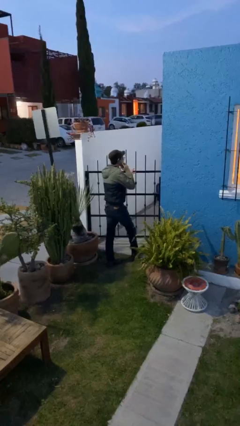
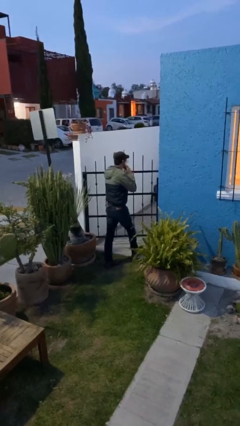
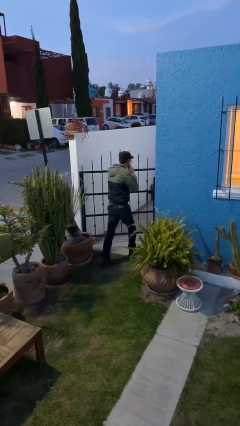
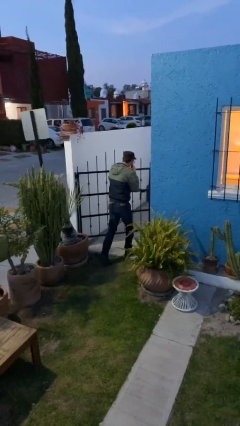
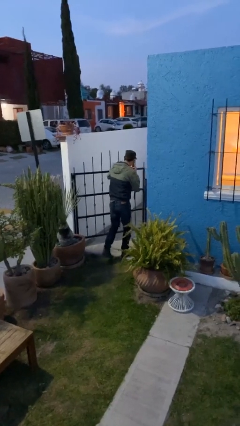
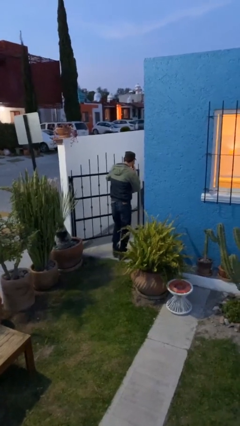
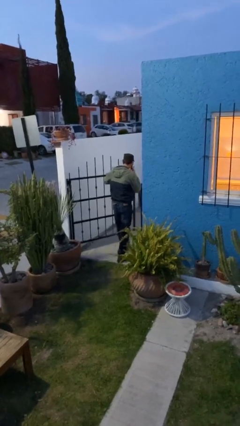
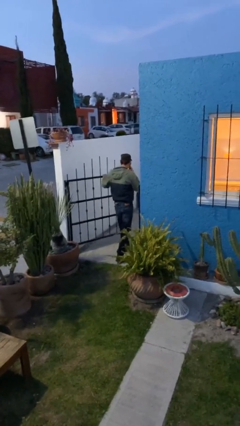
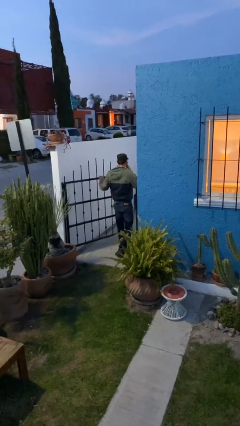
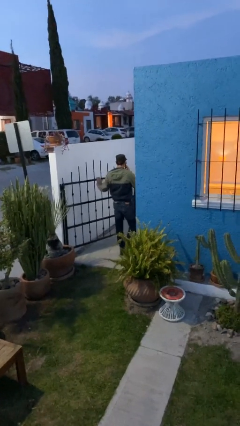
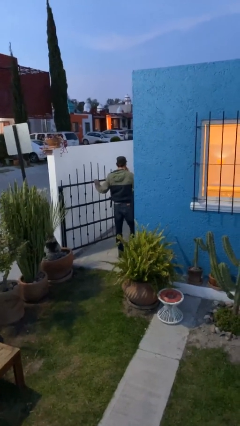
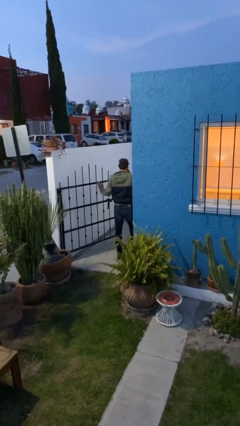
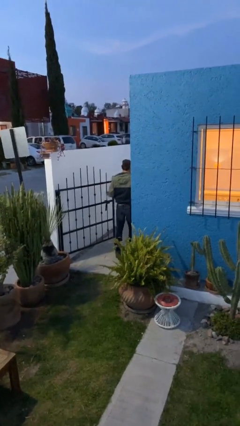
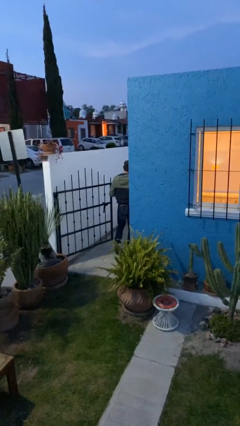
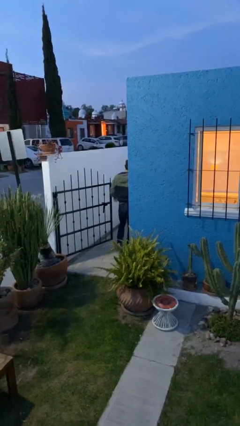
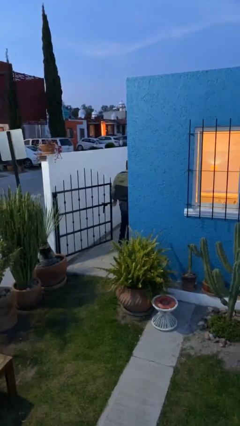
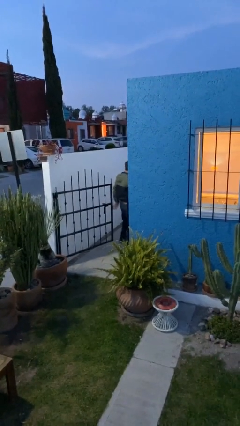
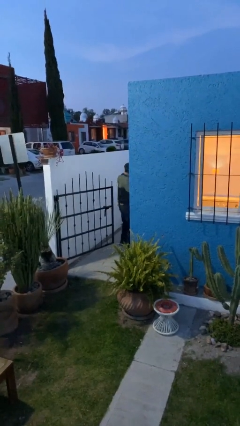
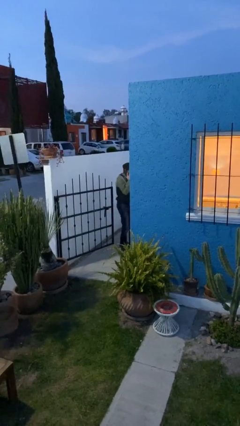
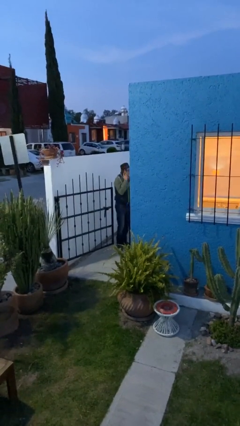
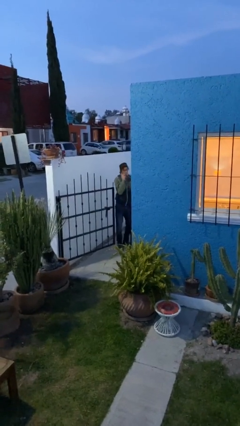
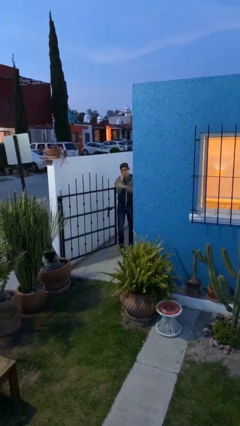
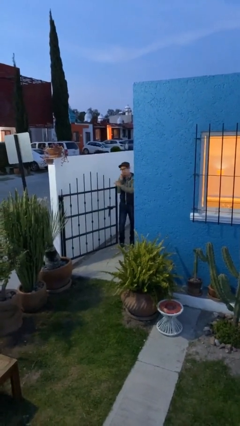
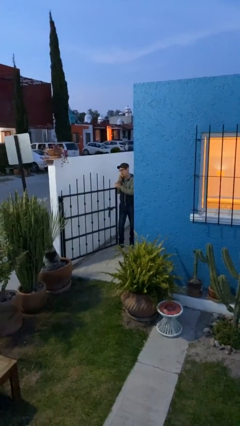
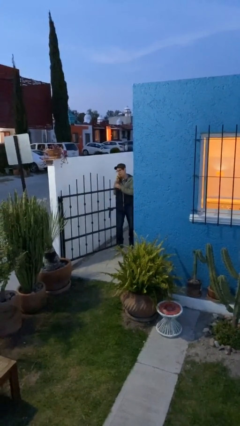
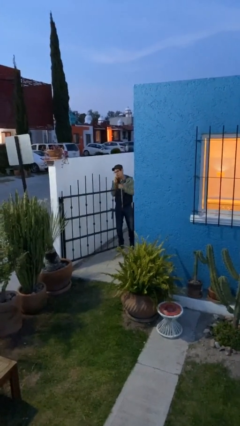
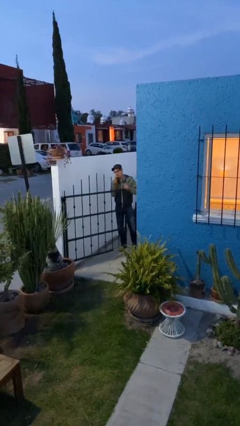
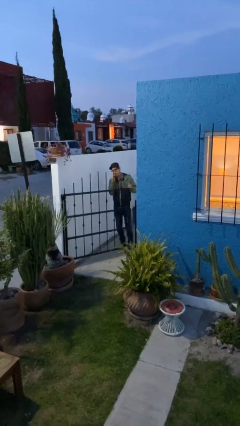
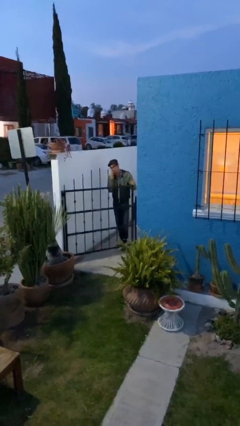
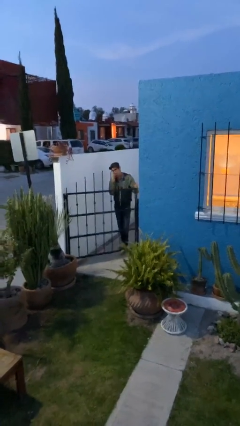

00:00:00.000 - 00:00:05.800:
person exits scene through structure

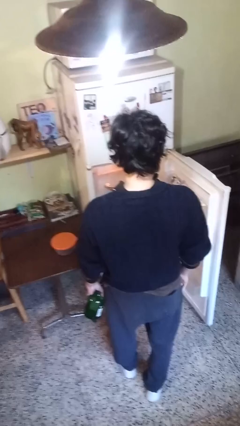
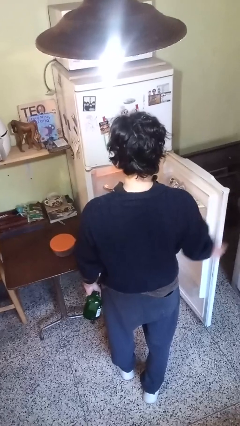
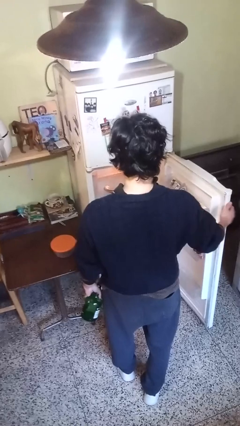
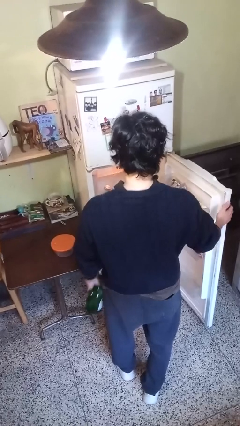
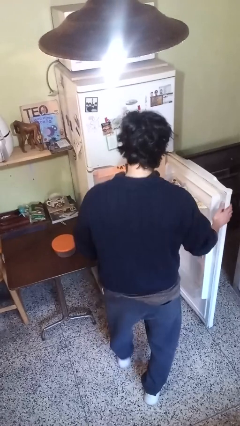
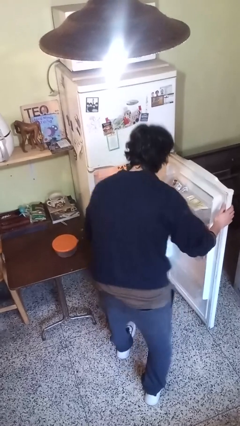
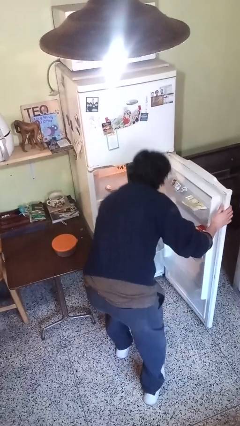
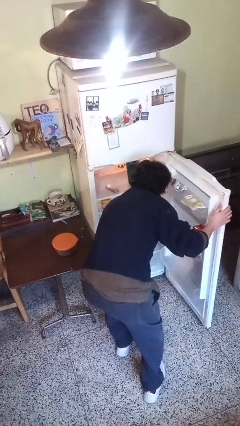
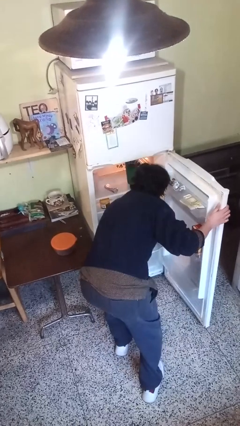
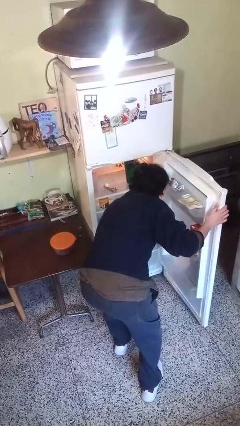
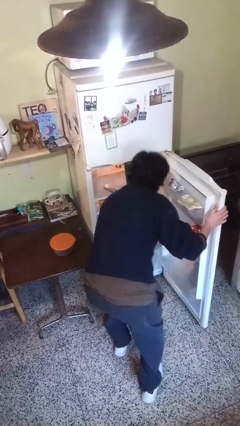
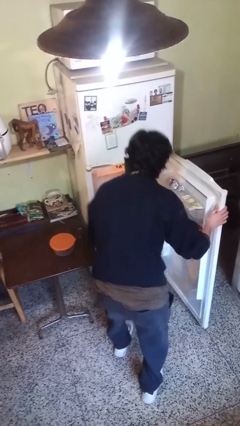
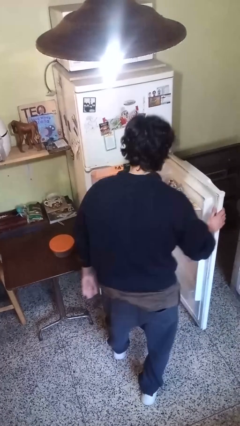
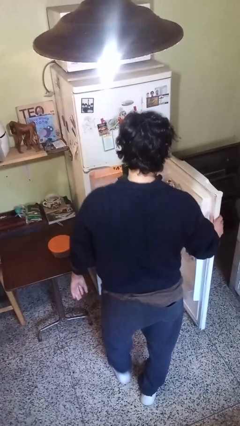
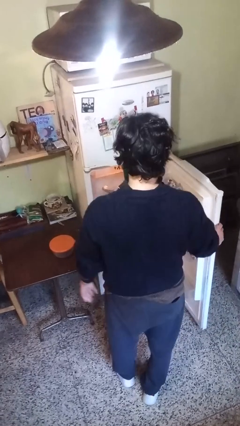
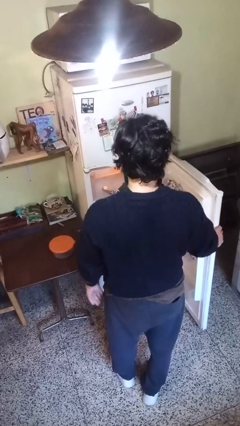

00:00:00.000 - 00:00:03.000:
person puts object into refrigerator

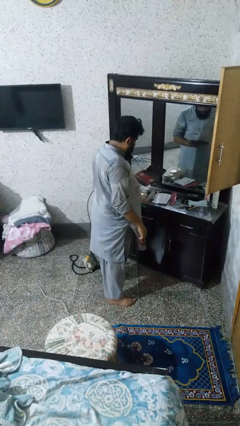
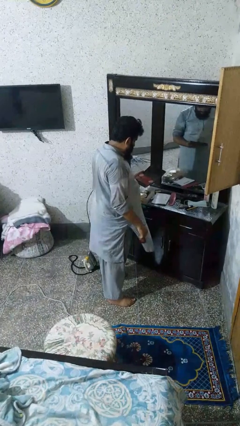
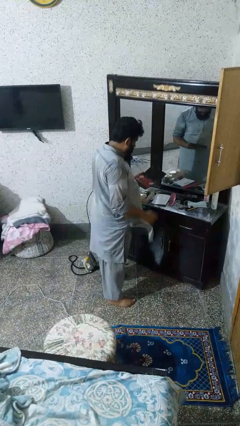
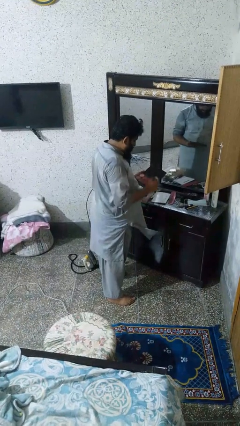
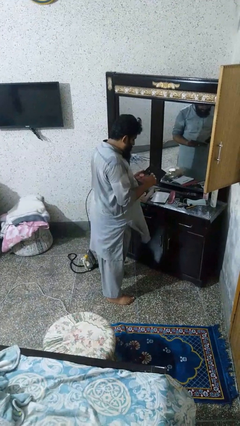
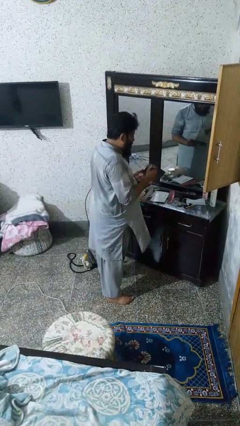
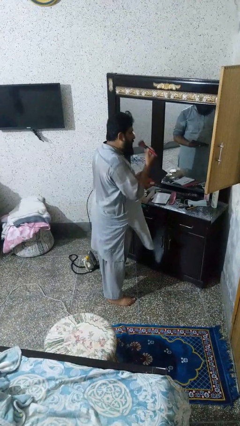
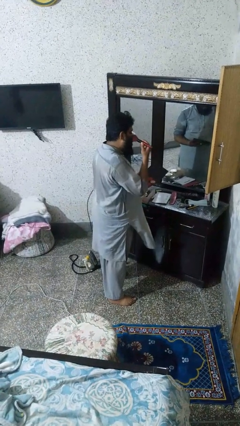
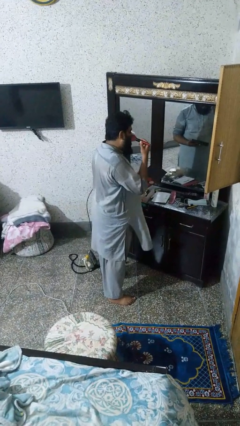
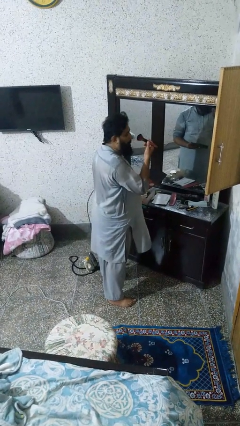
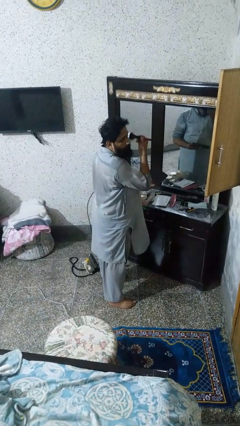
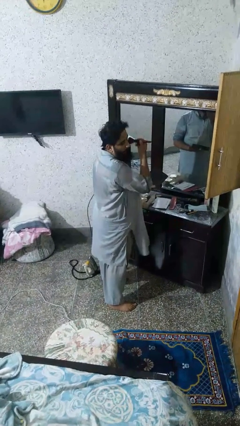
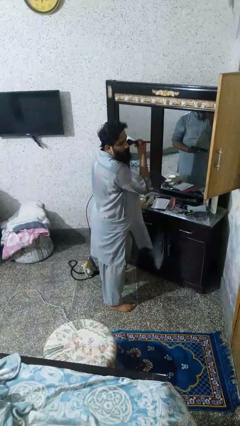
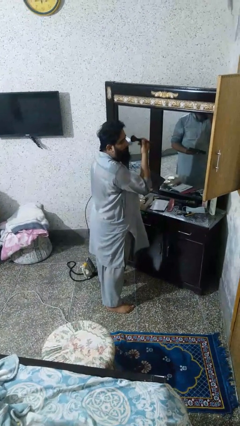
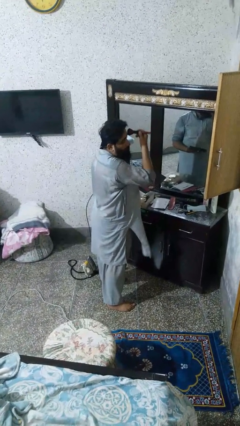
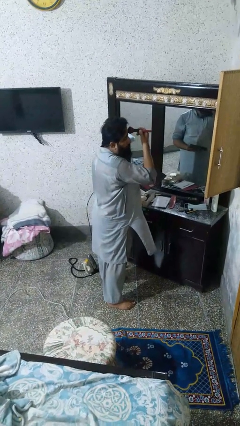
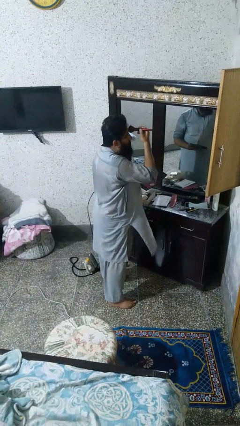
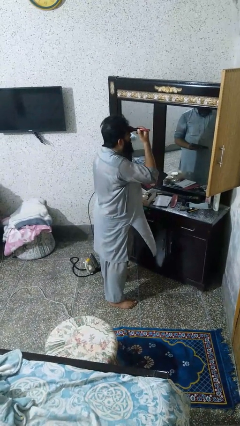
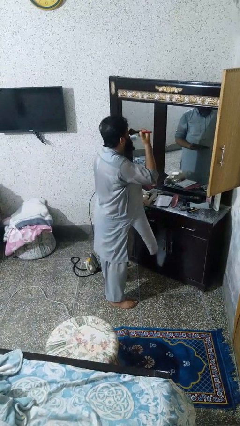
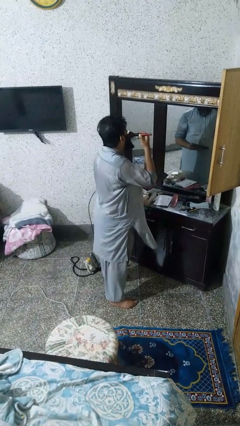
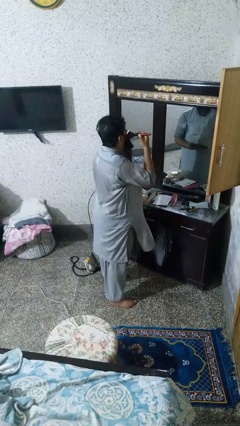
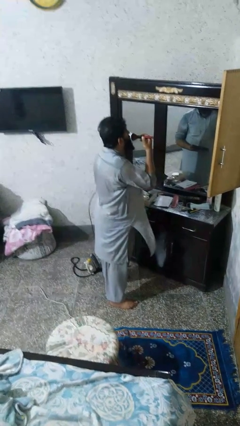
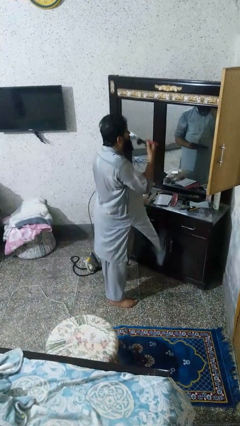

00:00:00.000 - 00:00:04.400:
person applies foundation makeup

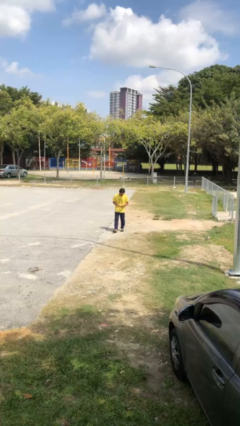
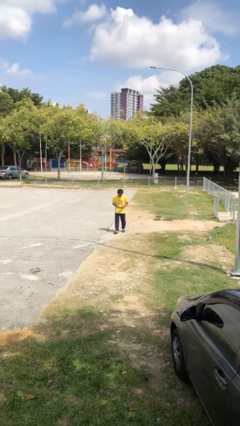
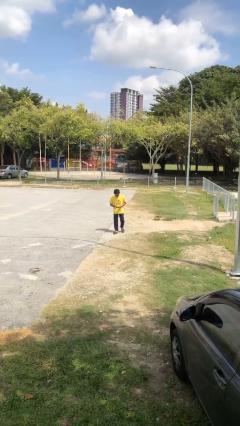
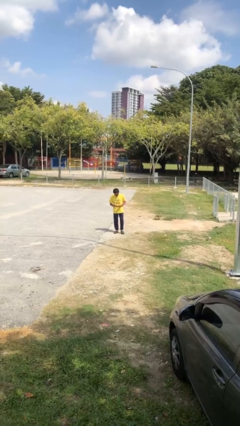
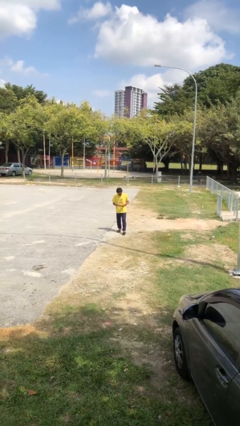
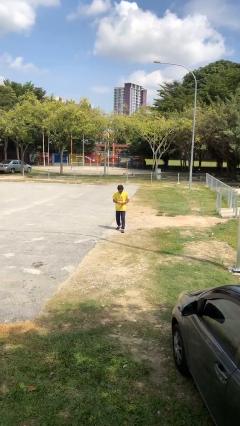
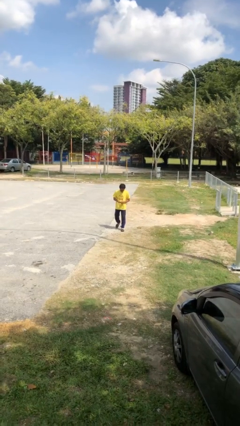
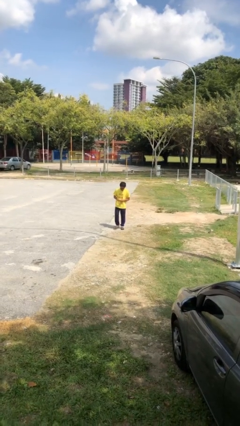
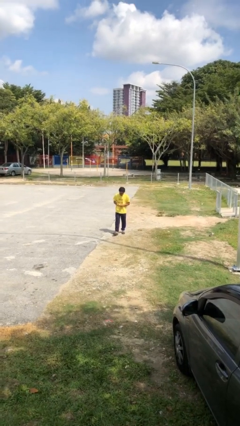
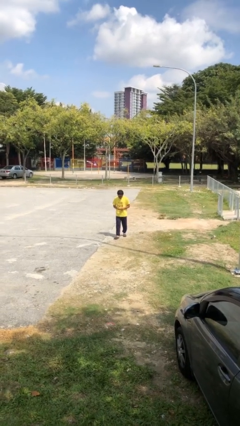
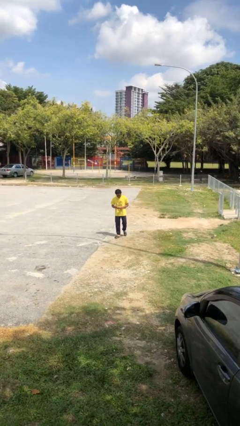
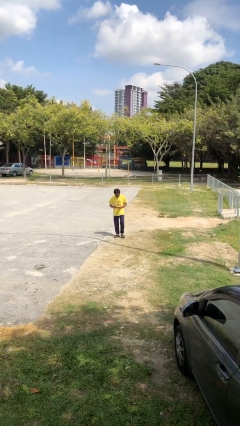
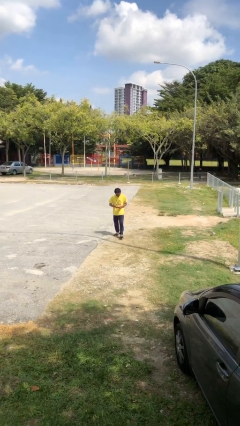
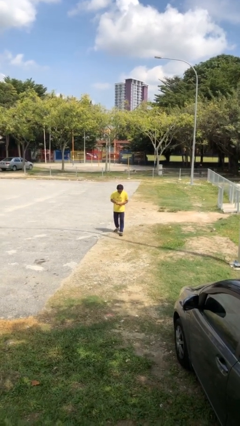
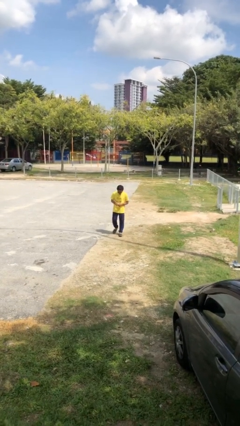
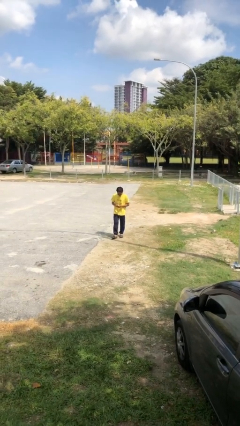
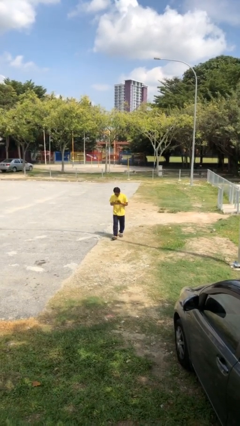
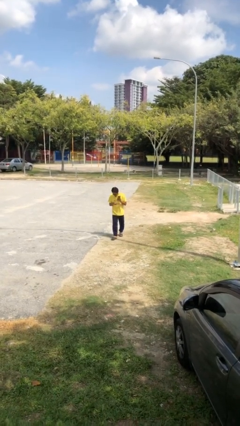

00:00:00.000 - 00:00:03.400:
person texts on phone

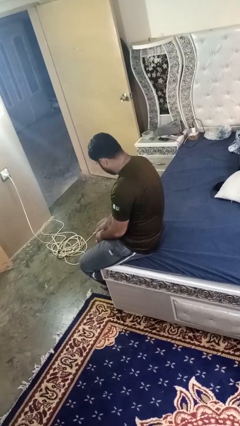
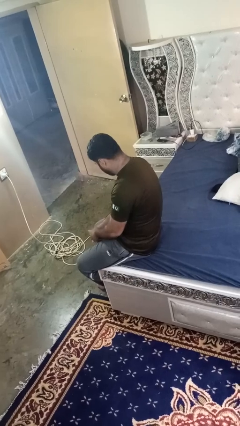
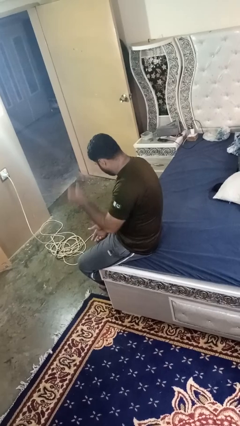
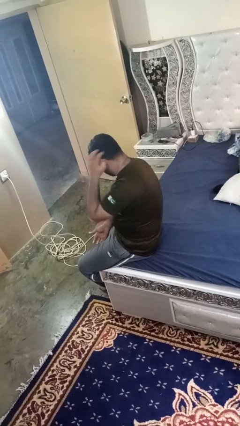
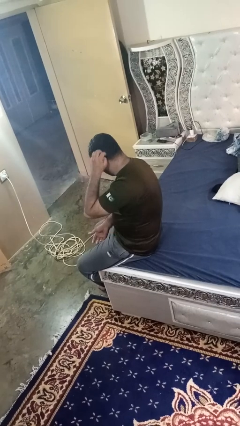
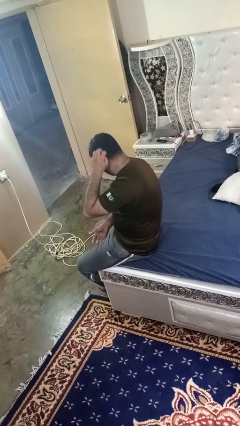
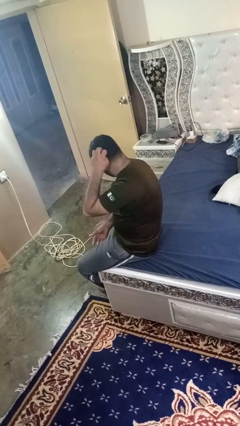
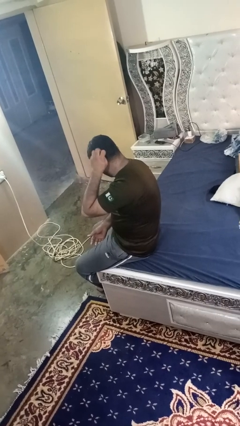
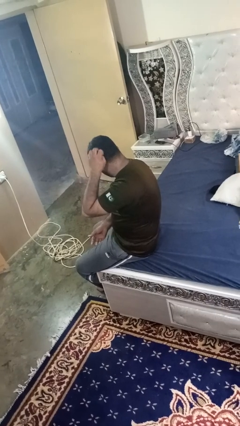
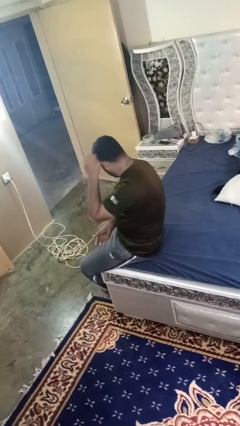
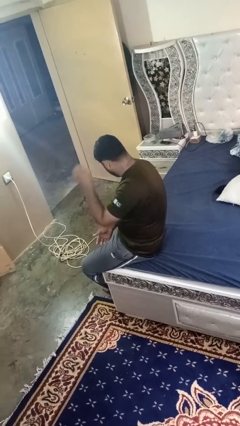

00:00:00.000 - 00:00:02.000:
person strokes hair
